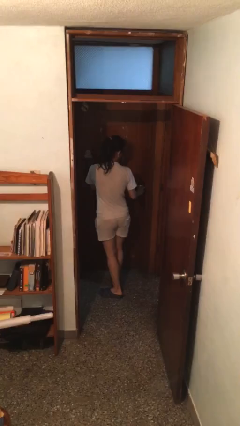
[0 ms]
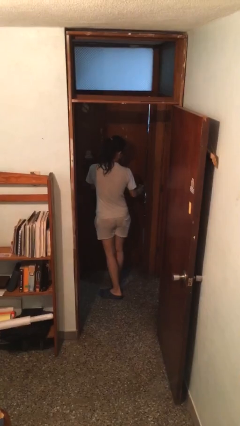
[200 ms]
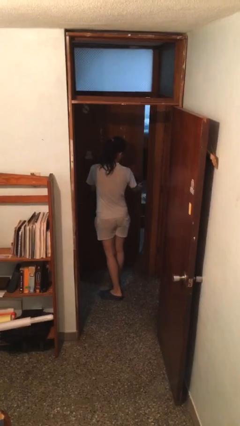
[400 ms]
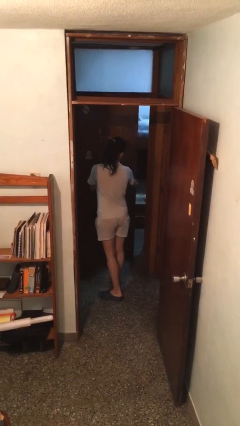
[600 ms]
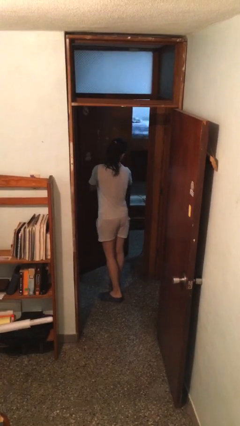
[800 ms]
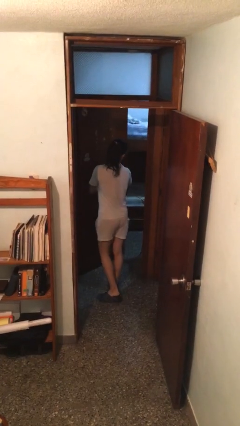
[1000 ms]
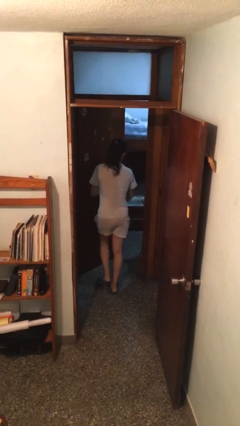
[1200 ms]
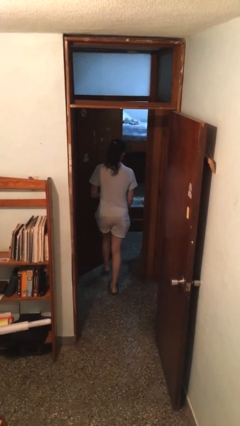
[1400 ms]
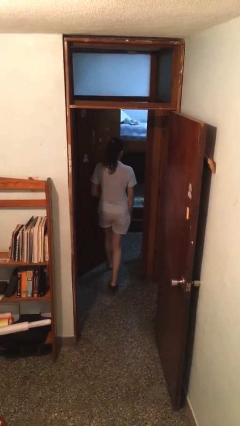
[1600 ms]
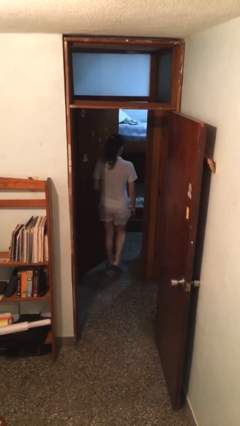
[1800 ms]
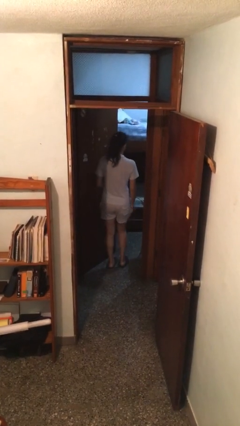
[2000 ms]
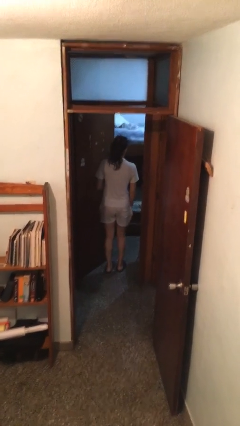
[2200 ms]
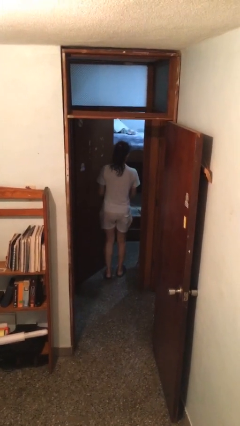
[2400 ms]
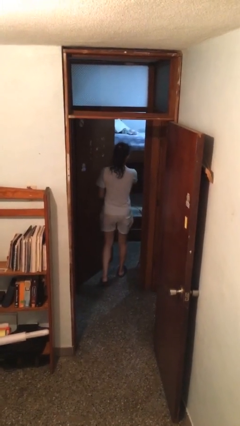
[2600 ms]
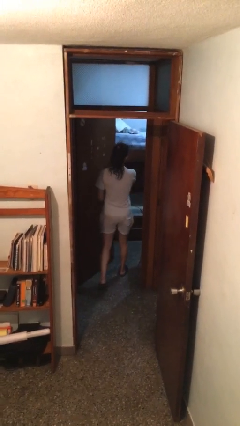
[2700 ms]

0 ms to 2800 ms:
person opens facility door

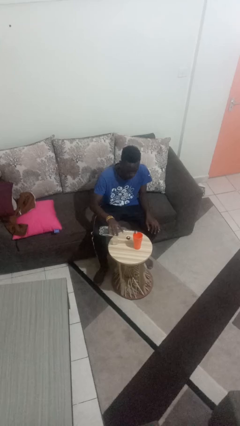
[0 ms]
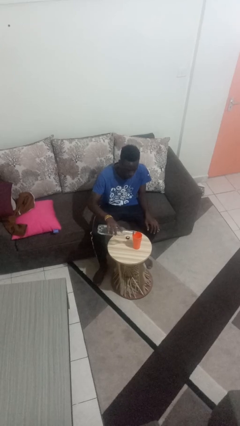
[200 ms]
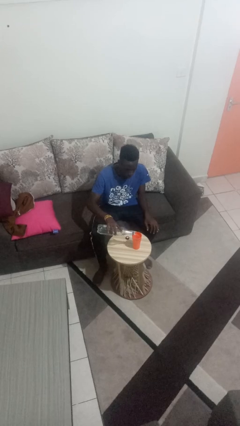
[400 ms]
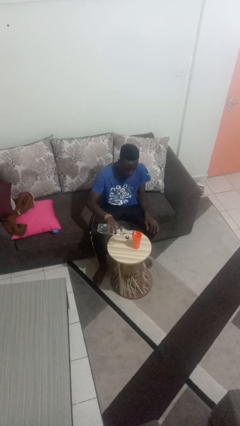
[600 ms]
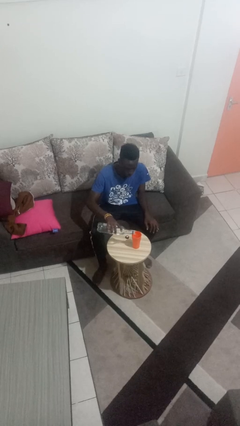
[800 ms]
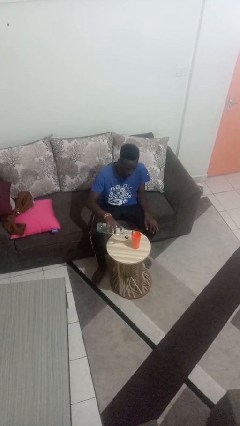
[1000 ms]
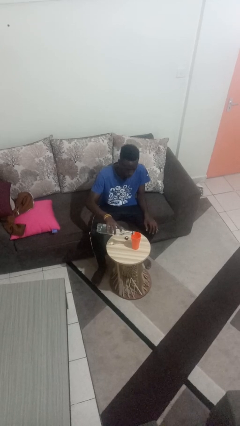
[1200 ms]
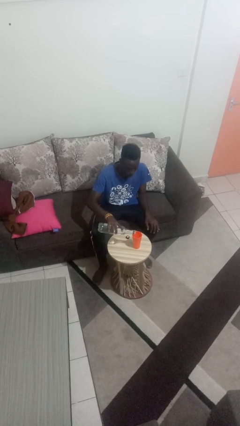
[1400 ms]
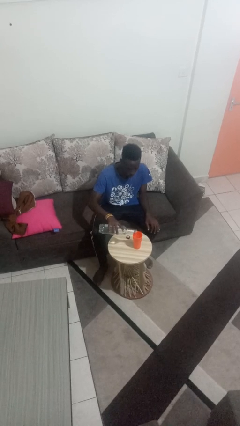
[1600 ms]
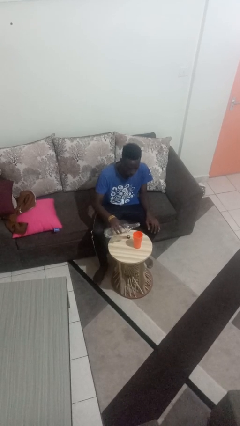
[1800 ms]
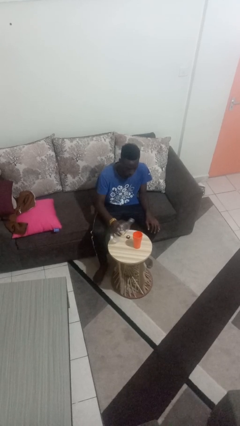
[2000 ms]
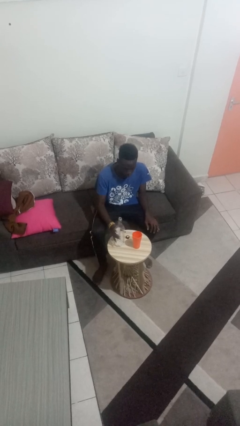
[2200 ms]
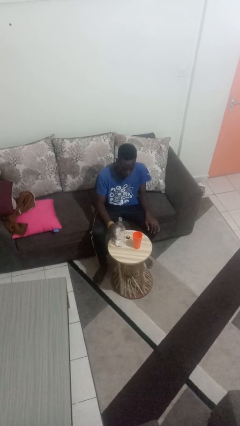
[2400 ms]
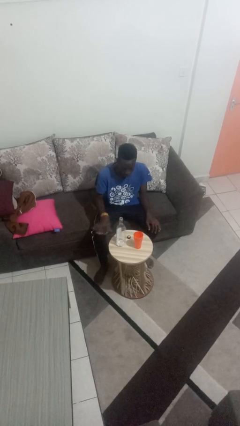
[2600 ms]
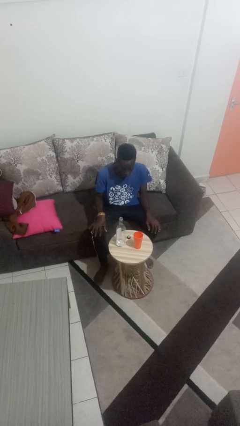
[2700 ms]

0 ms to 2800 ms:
person pours liquid into cup

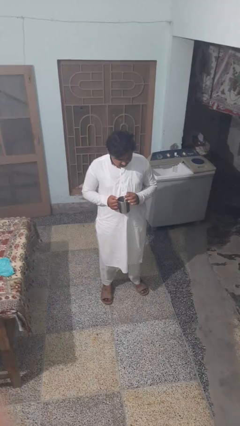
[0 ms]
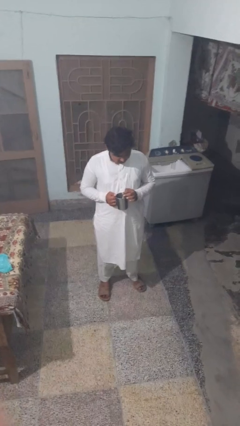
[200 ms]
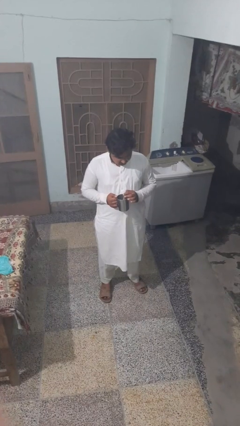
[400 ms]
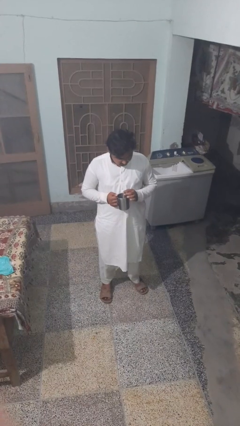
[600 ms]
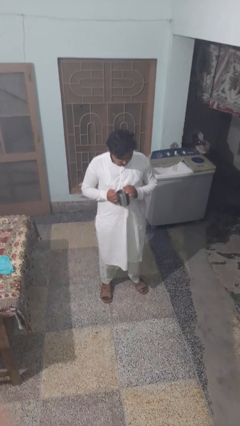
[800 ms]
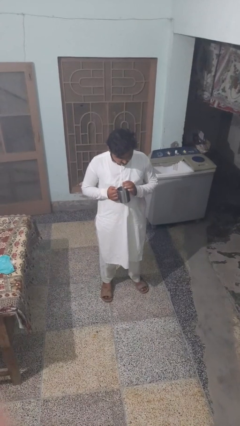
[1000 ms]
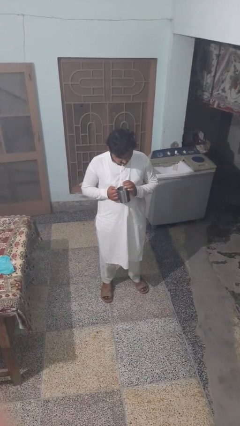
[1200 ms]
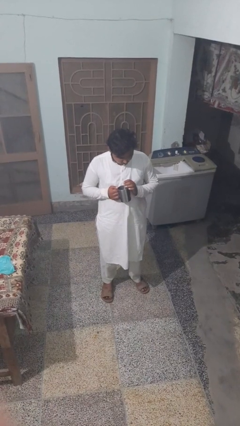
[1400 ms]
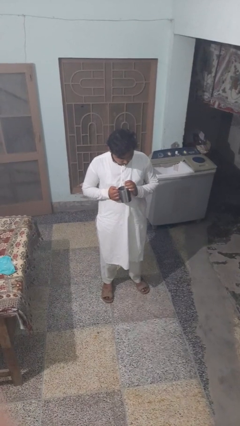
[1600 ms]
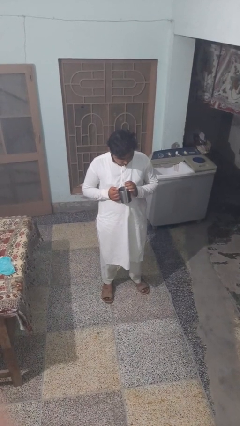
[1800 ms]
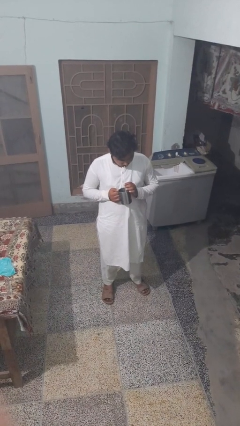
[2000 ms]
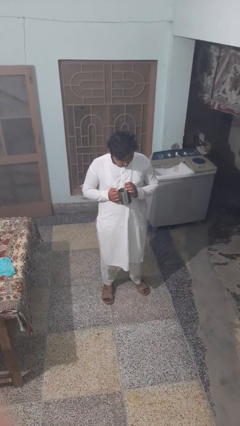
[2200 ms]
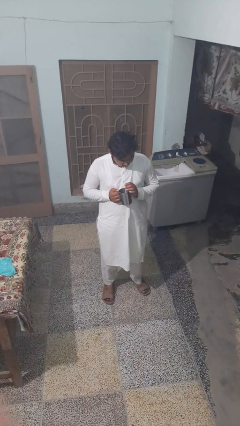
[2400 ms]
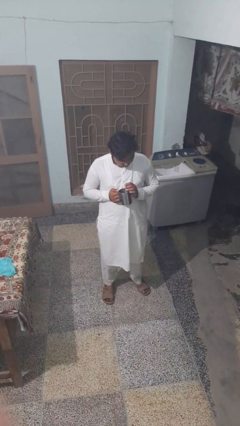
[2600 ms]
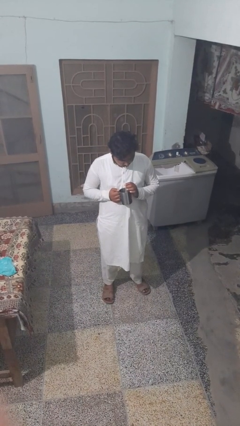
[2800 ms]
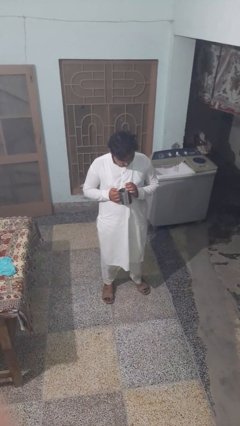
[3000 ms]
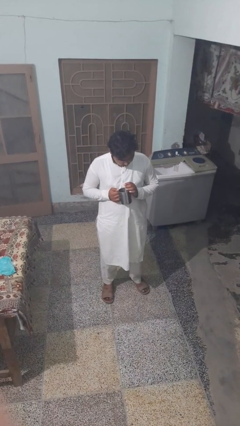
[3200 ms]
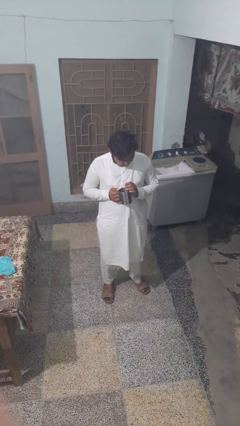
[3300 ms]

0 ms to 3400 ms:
person drinks from straw

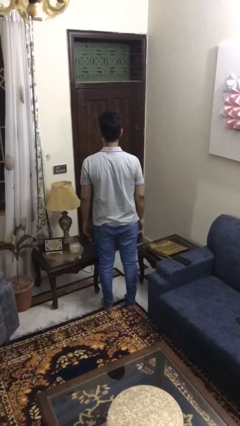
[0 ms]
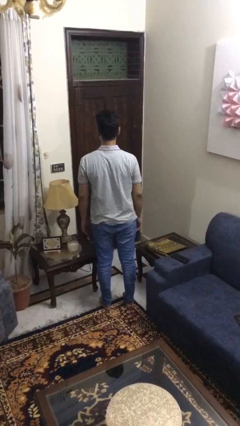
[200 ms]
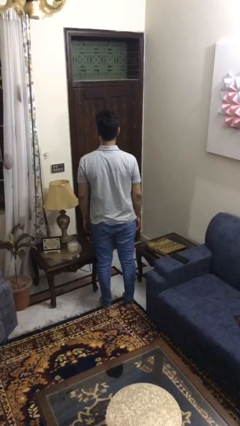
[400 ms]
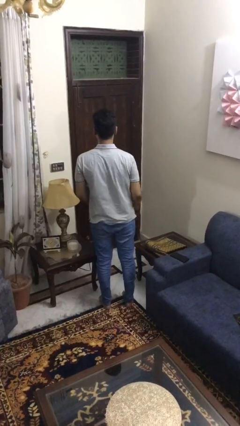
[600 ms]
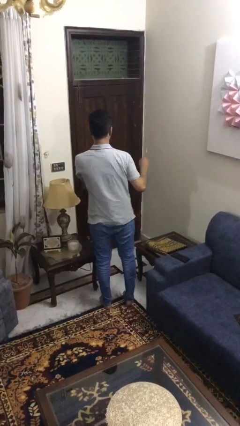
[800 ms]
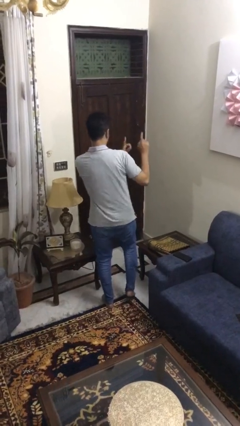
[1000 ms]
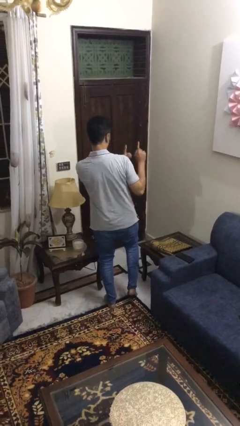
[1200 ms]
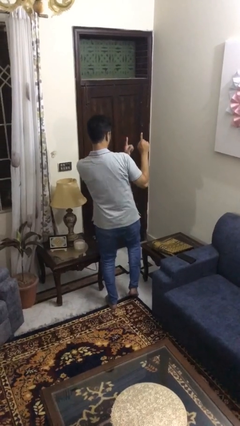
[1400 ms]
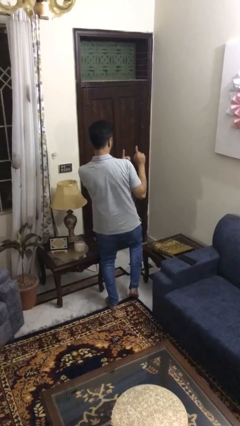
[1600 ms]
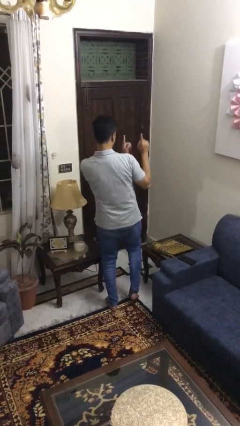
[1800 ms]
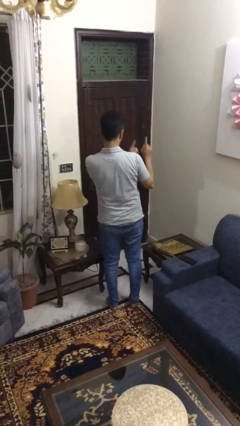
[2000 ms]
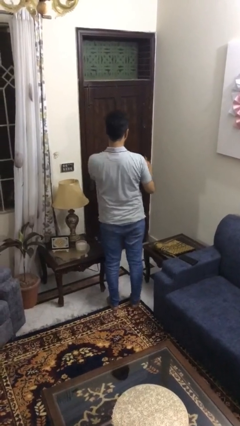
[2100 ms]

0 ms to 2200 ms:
person dances in place

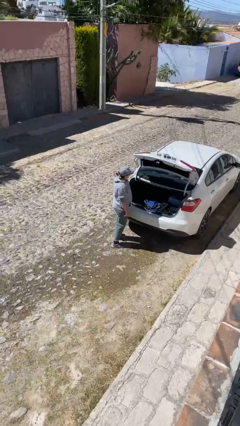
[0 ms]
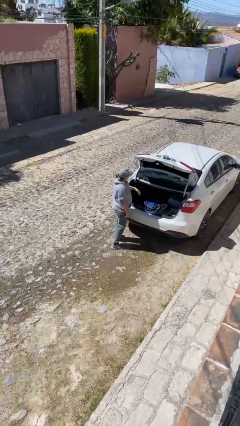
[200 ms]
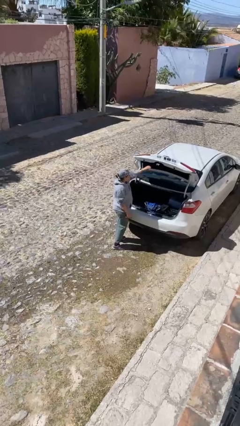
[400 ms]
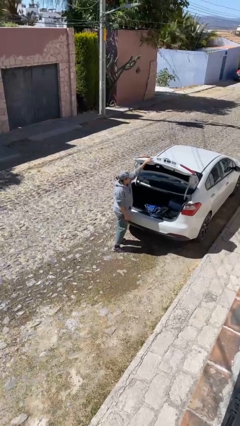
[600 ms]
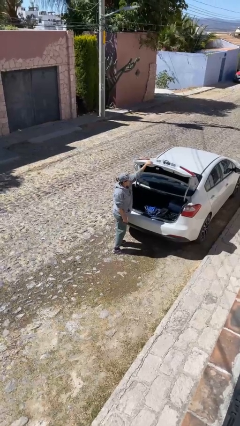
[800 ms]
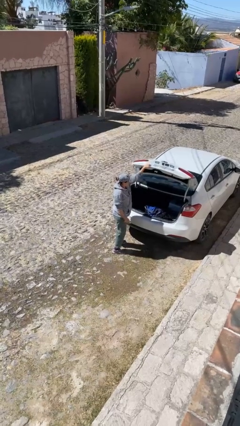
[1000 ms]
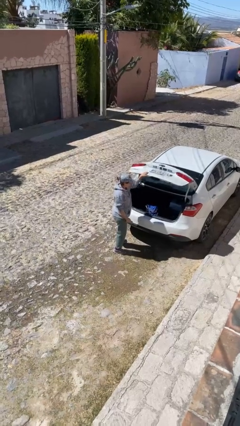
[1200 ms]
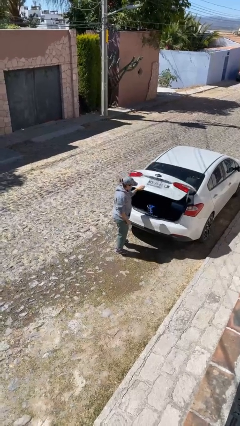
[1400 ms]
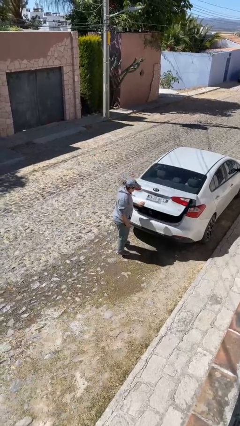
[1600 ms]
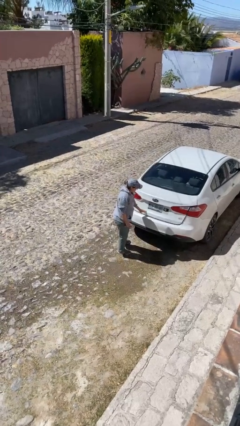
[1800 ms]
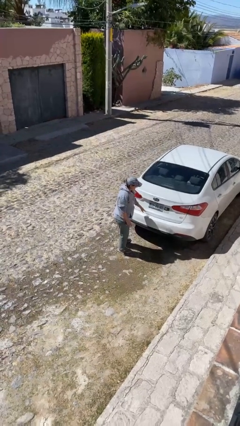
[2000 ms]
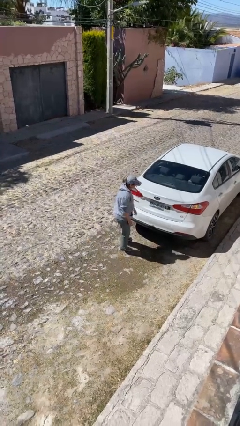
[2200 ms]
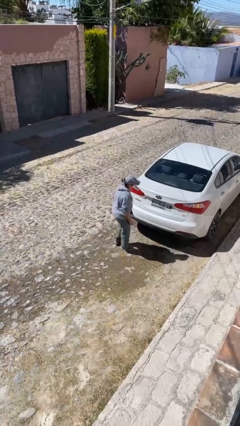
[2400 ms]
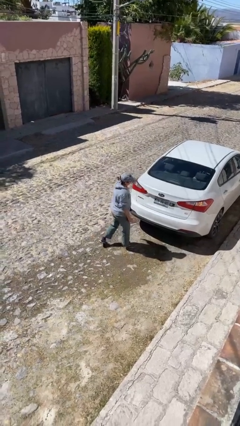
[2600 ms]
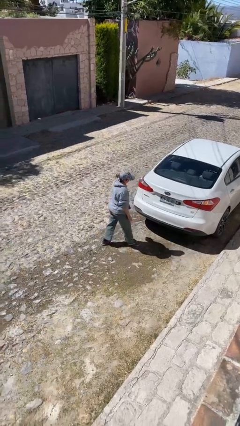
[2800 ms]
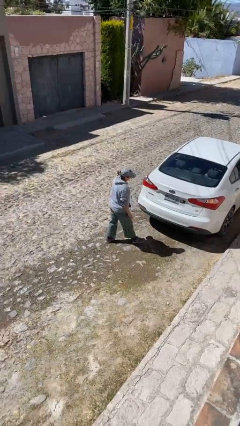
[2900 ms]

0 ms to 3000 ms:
person closes car trunk

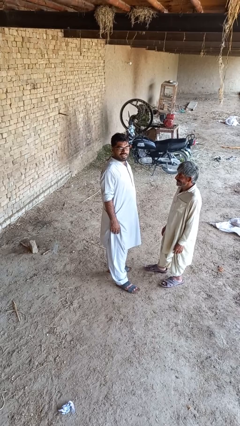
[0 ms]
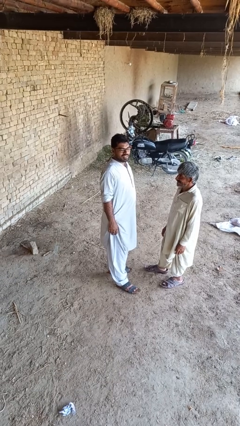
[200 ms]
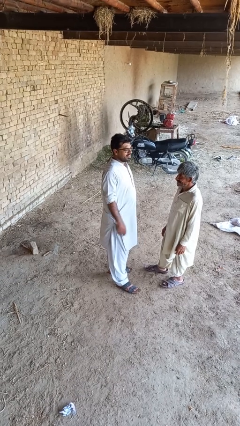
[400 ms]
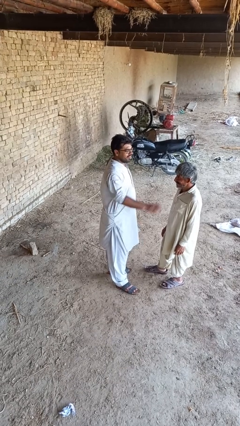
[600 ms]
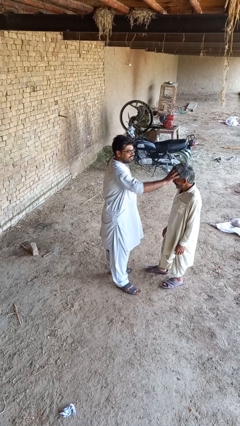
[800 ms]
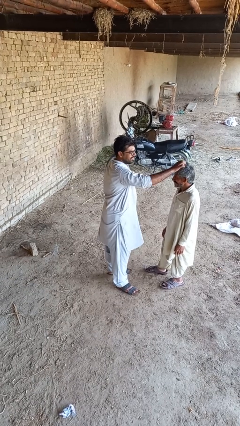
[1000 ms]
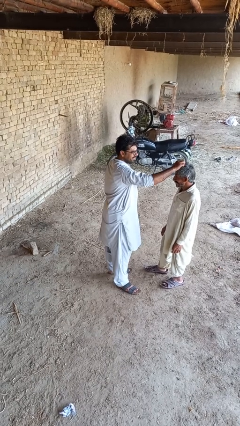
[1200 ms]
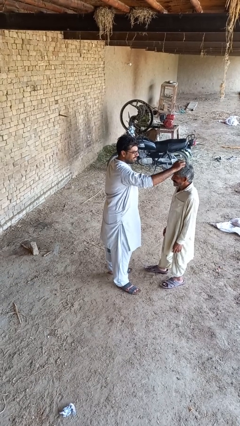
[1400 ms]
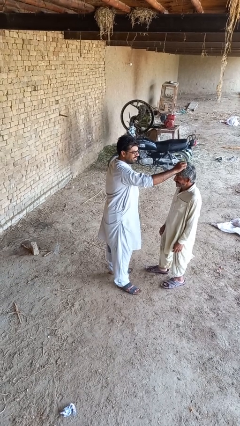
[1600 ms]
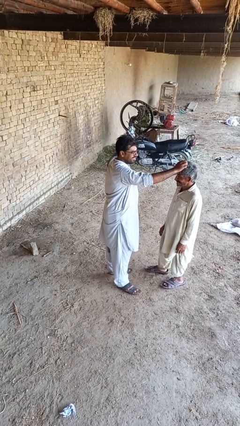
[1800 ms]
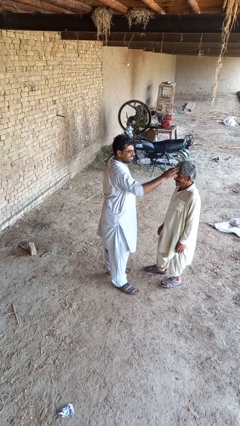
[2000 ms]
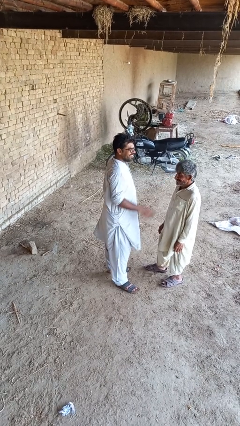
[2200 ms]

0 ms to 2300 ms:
person grabs person by hair

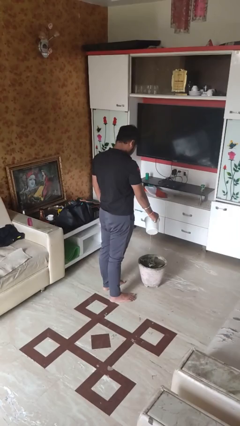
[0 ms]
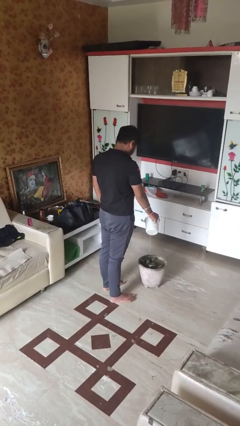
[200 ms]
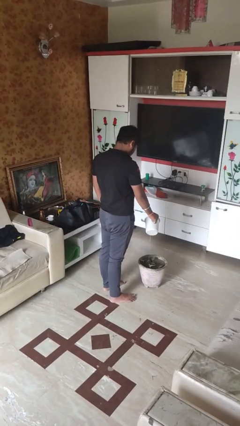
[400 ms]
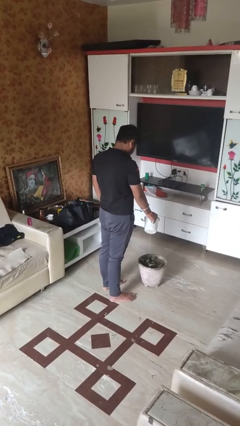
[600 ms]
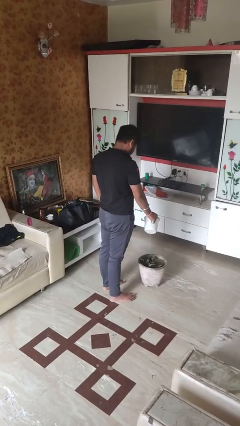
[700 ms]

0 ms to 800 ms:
person waters houseplant
